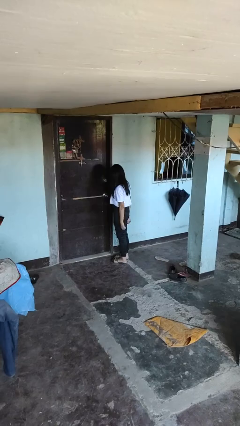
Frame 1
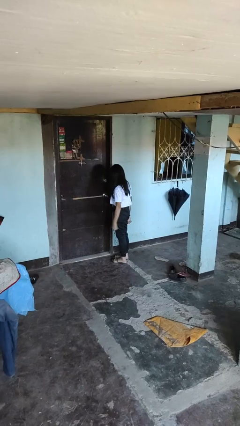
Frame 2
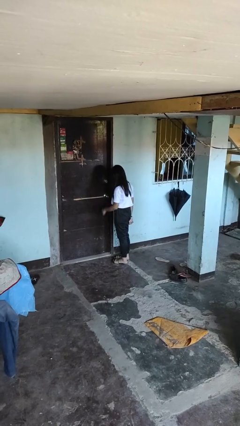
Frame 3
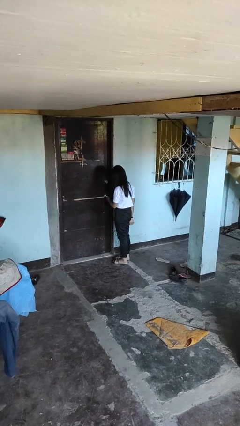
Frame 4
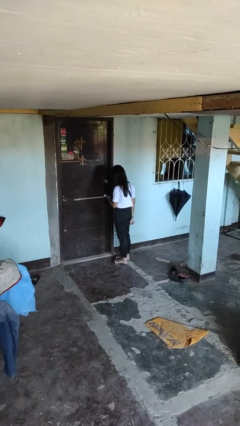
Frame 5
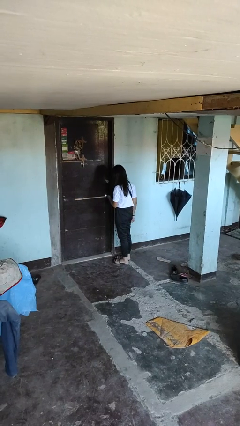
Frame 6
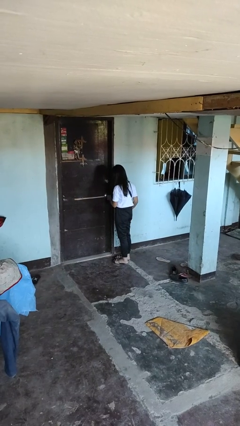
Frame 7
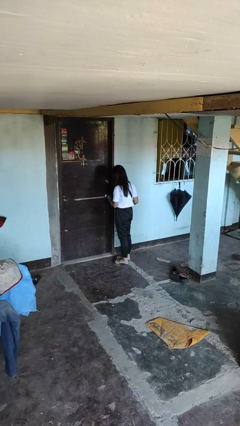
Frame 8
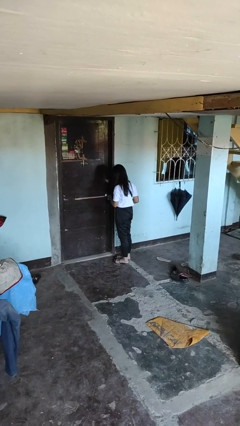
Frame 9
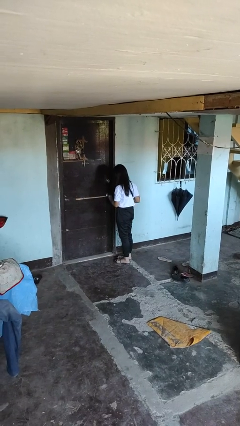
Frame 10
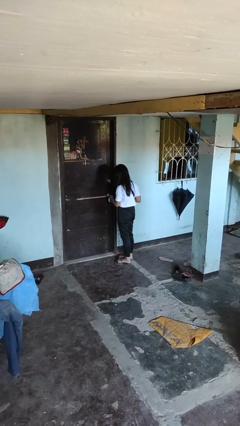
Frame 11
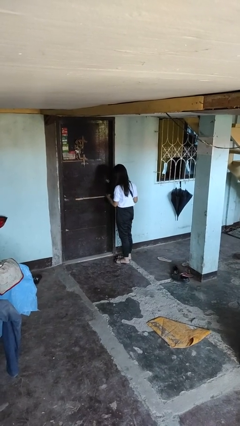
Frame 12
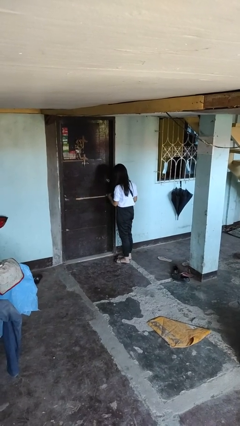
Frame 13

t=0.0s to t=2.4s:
person unlocks door with keys

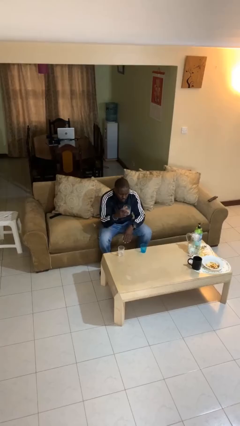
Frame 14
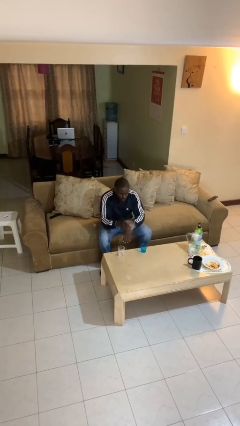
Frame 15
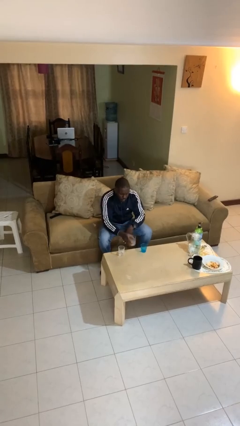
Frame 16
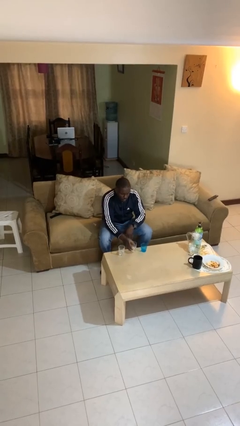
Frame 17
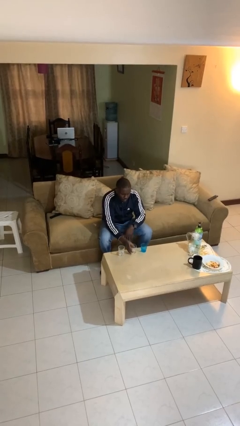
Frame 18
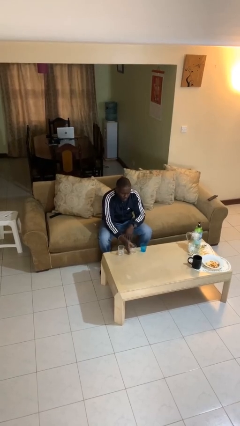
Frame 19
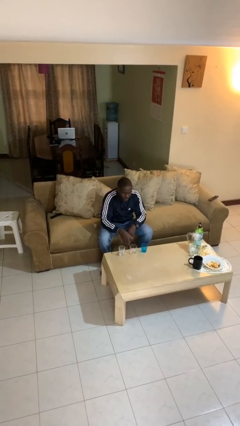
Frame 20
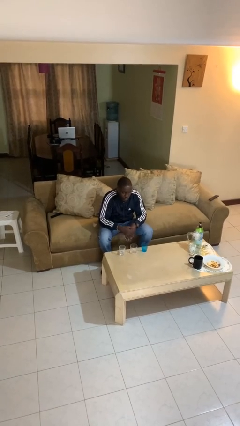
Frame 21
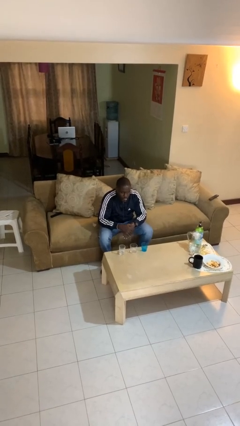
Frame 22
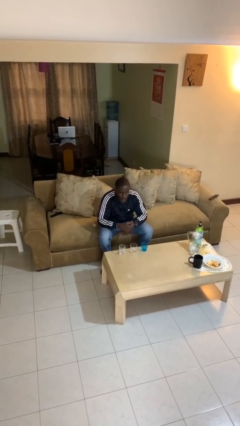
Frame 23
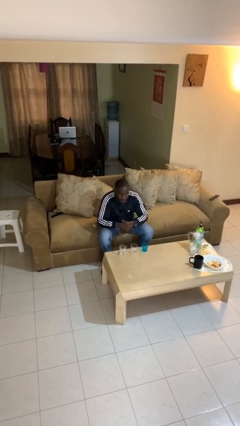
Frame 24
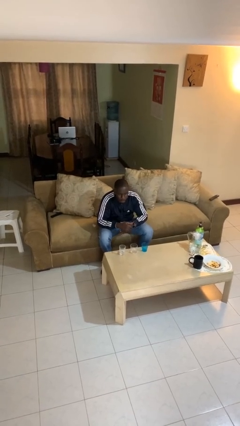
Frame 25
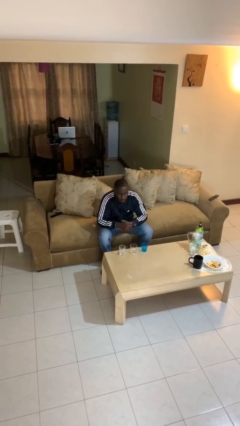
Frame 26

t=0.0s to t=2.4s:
person puts down object on table

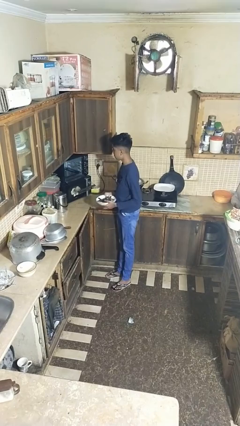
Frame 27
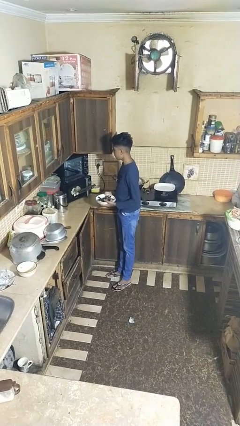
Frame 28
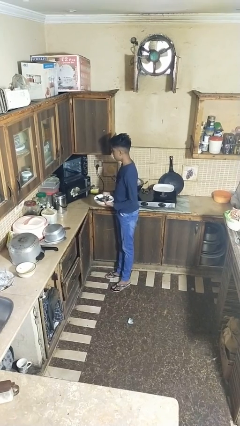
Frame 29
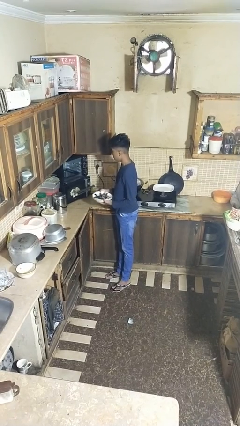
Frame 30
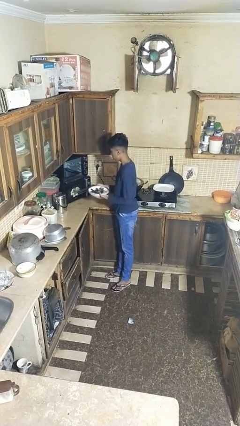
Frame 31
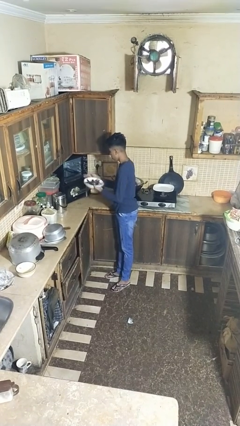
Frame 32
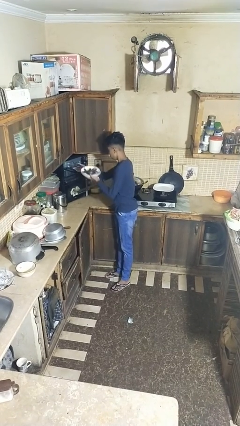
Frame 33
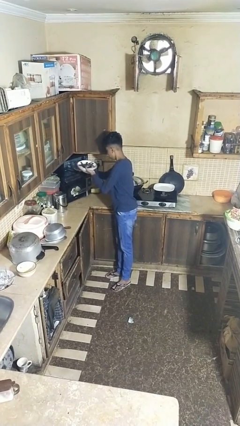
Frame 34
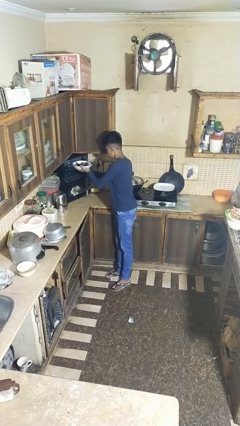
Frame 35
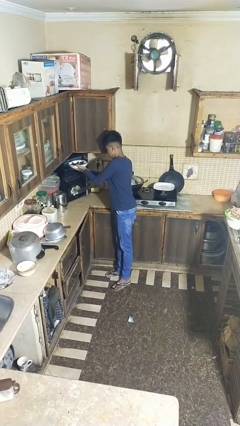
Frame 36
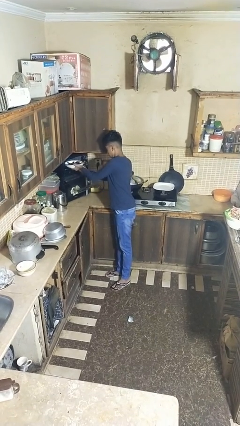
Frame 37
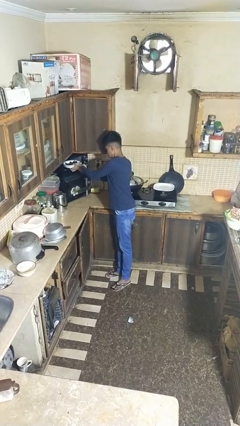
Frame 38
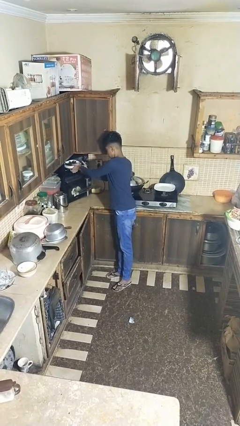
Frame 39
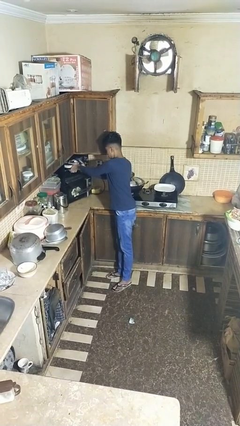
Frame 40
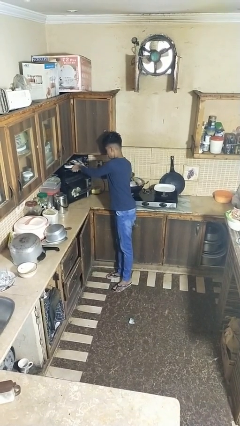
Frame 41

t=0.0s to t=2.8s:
person loads dishwasher

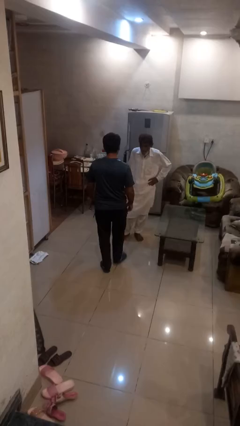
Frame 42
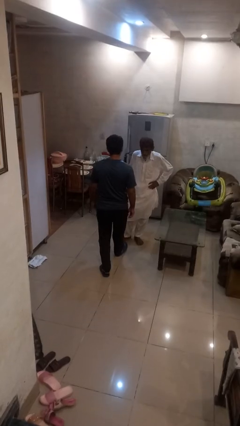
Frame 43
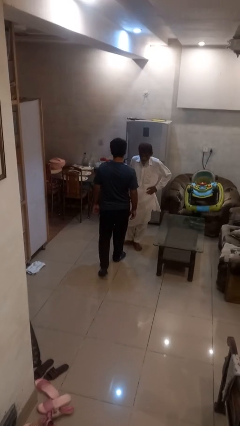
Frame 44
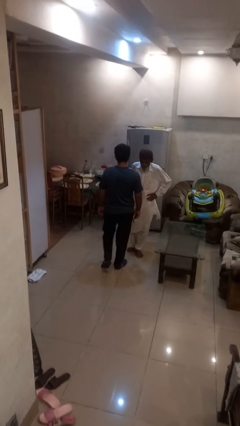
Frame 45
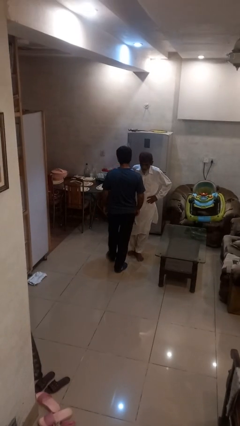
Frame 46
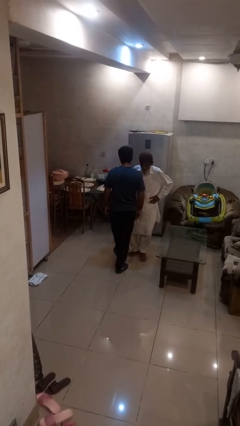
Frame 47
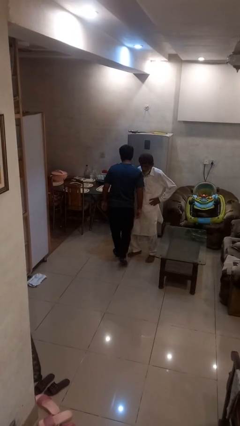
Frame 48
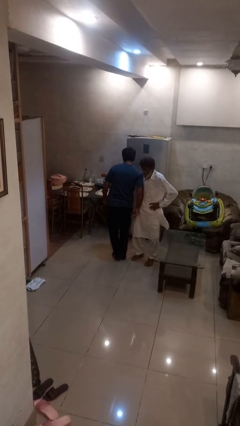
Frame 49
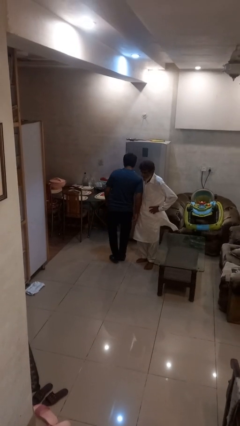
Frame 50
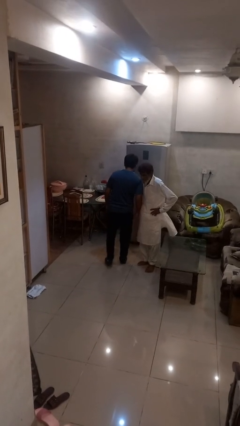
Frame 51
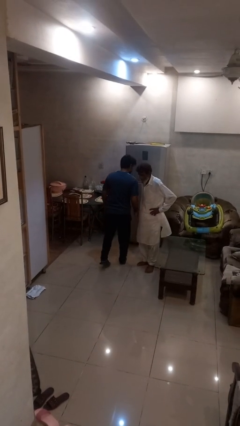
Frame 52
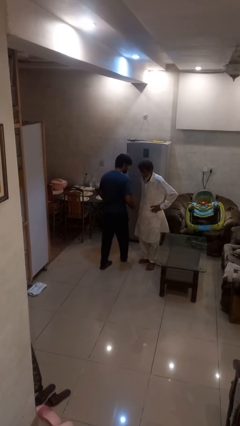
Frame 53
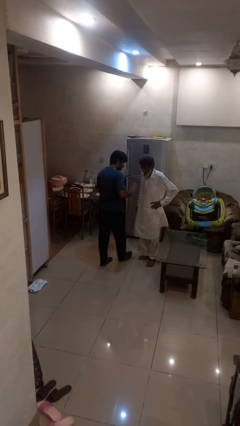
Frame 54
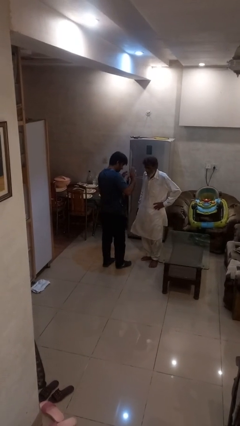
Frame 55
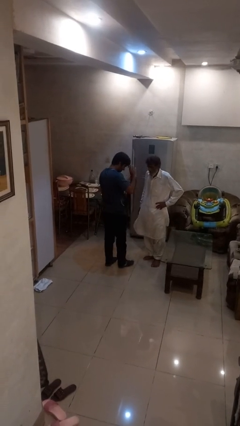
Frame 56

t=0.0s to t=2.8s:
person bumps into person

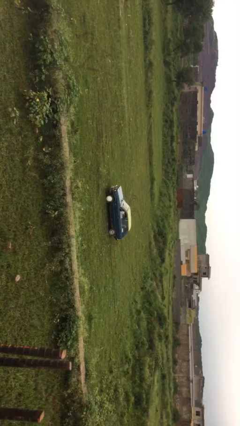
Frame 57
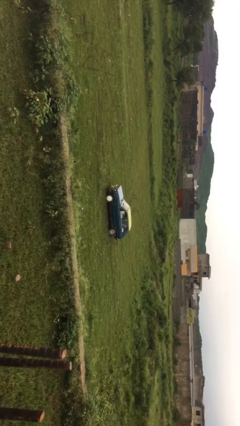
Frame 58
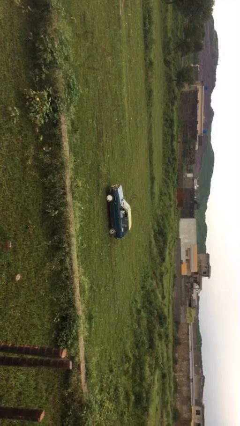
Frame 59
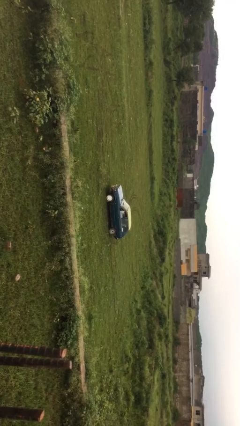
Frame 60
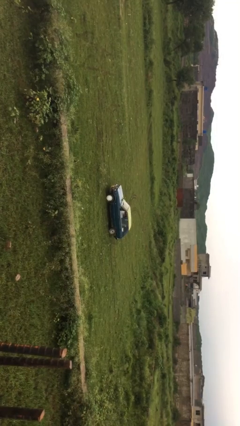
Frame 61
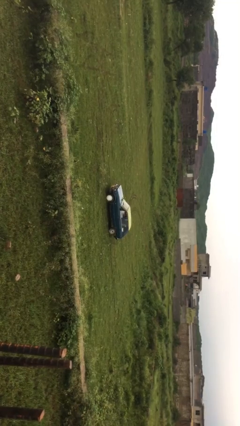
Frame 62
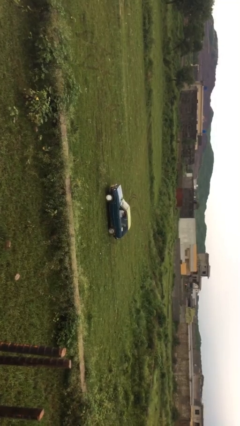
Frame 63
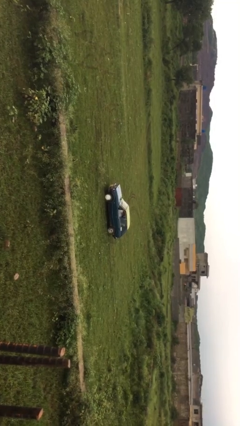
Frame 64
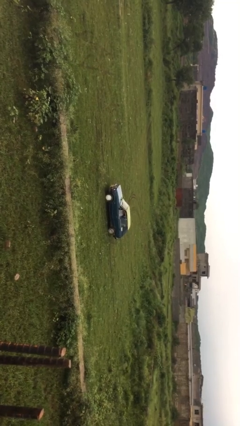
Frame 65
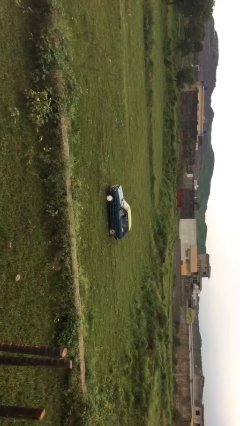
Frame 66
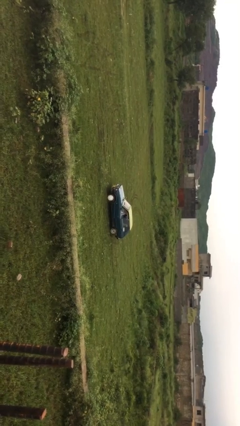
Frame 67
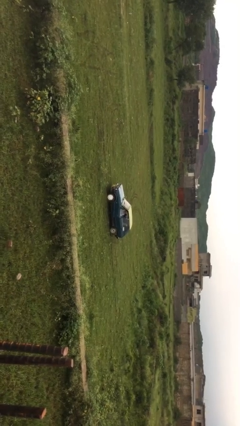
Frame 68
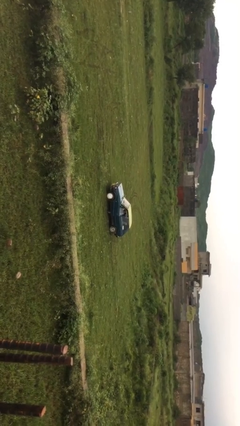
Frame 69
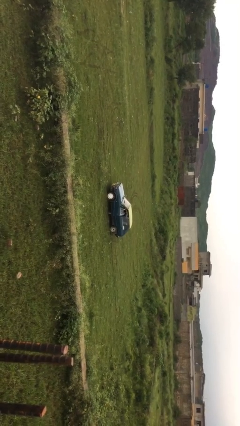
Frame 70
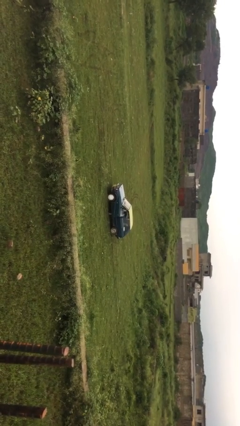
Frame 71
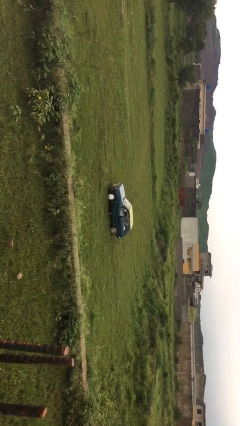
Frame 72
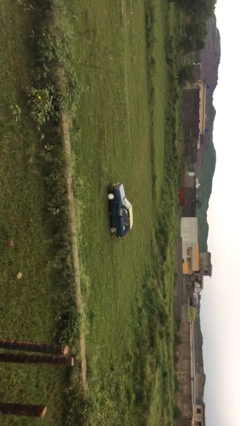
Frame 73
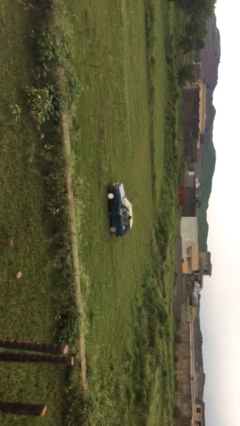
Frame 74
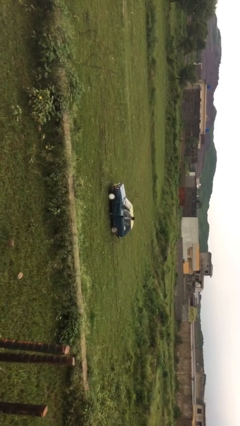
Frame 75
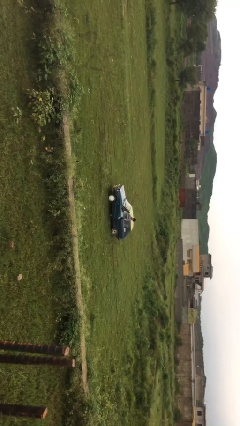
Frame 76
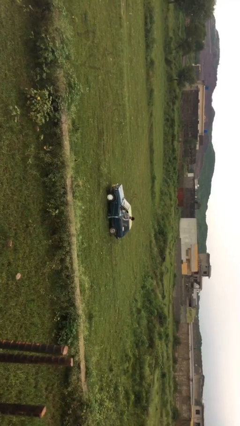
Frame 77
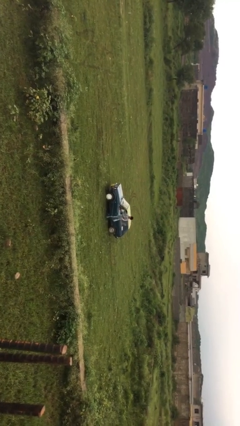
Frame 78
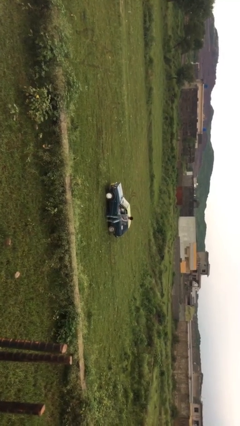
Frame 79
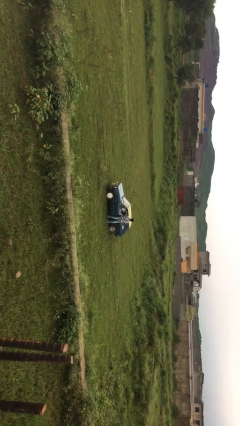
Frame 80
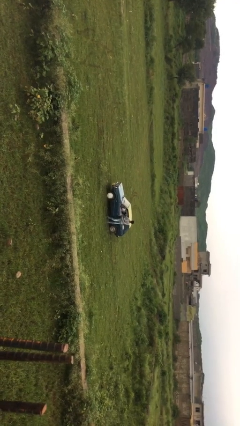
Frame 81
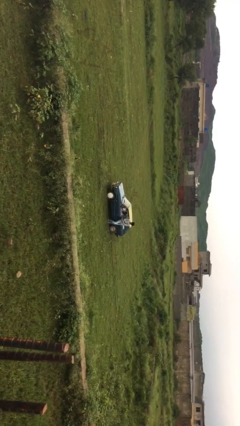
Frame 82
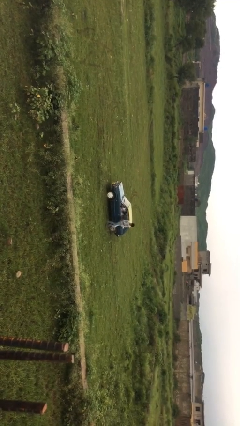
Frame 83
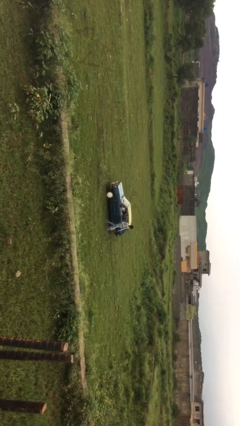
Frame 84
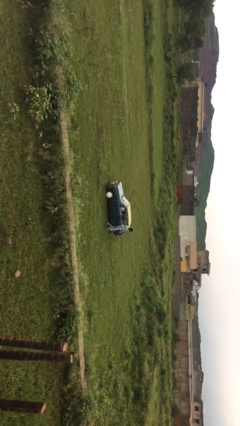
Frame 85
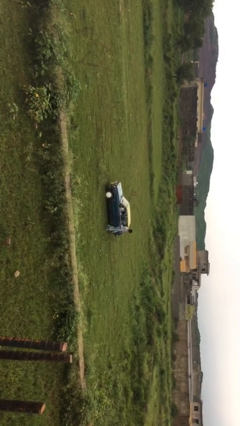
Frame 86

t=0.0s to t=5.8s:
car drops off person

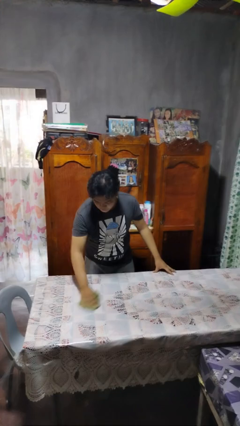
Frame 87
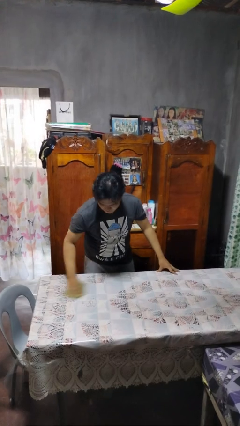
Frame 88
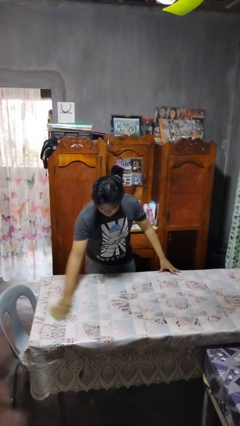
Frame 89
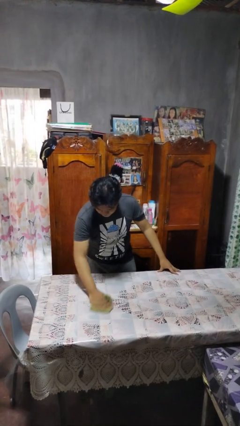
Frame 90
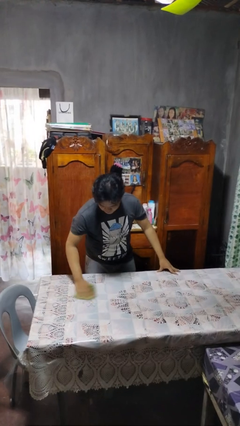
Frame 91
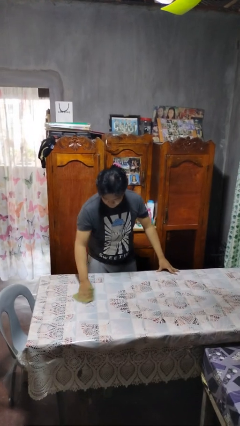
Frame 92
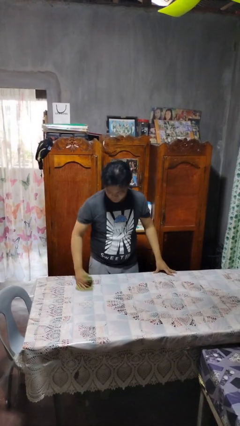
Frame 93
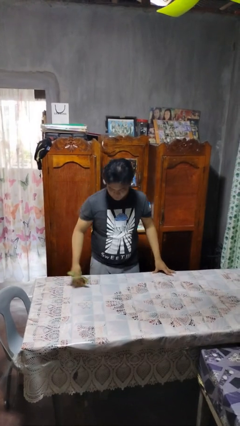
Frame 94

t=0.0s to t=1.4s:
person cleans table with rag
